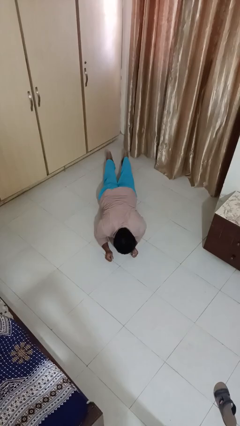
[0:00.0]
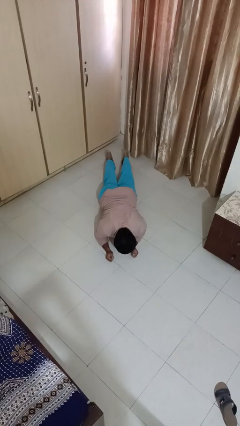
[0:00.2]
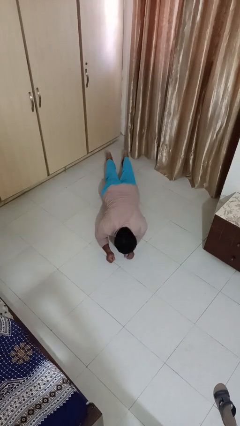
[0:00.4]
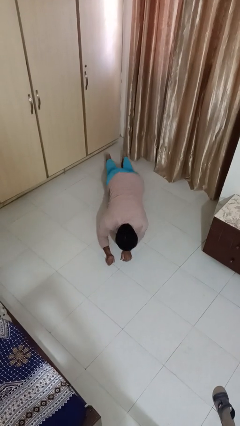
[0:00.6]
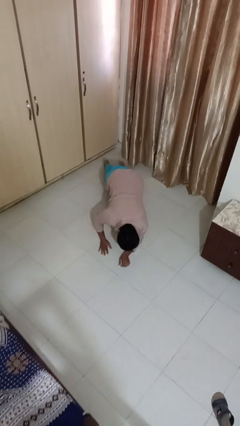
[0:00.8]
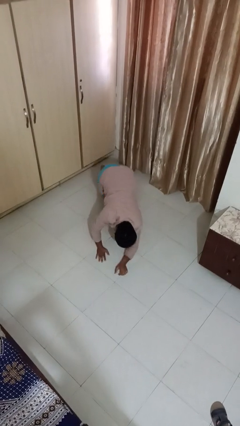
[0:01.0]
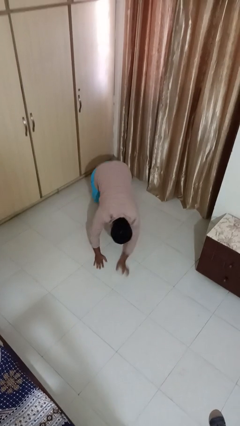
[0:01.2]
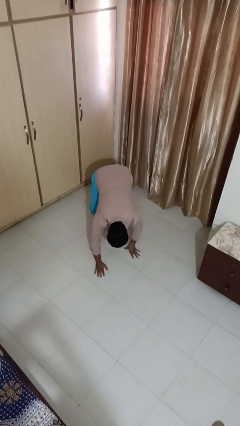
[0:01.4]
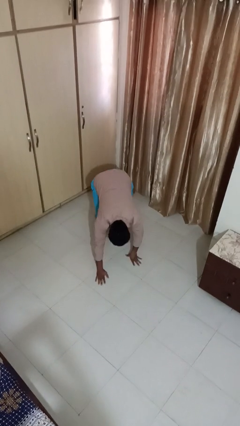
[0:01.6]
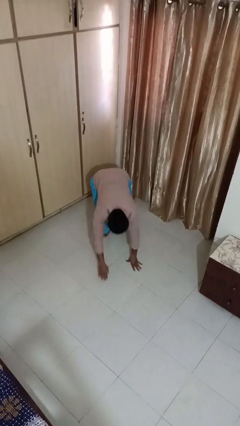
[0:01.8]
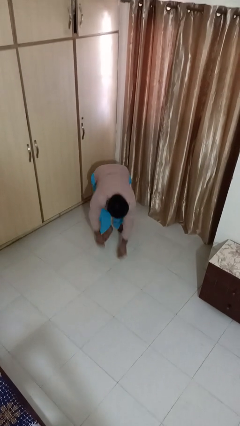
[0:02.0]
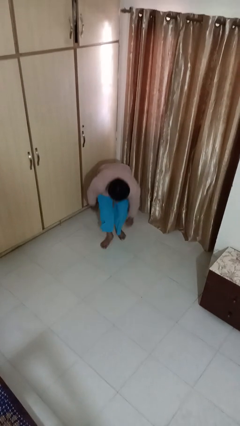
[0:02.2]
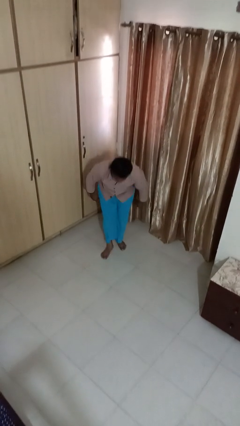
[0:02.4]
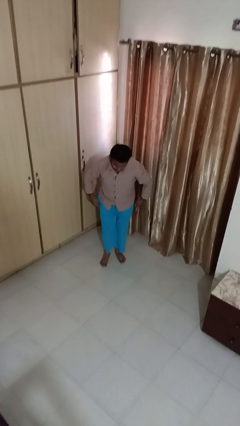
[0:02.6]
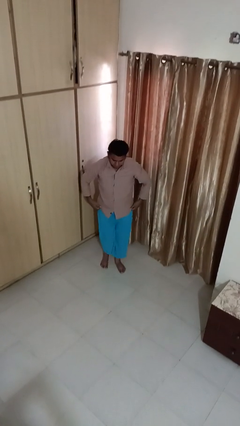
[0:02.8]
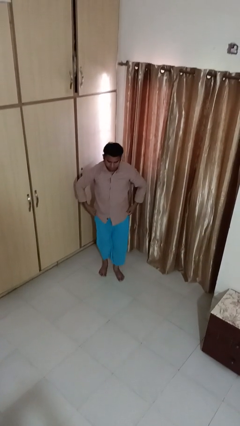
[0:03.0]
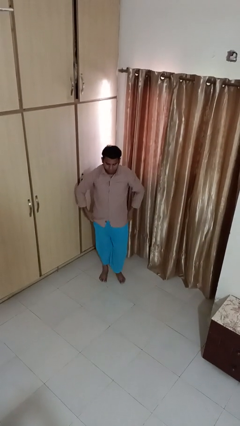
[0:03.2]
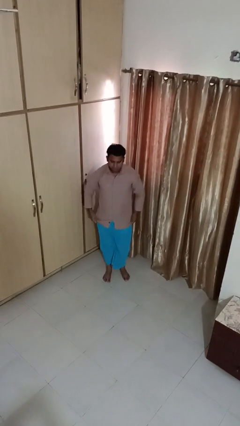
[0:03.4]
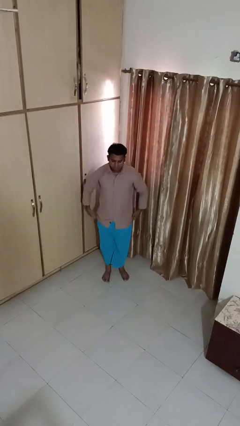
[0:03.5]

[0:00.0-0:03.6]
person stands up from floor

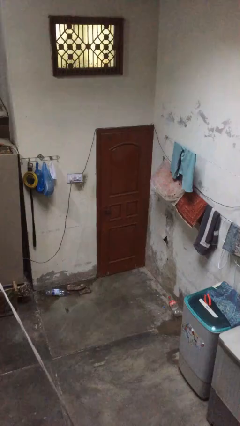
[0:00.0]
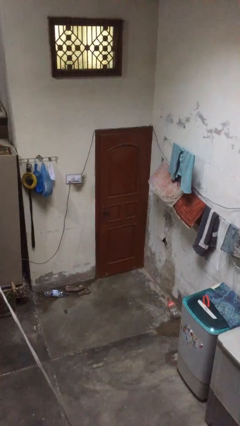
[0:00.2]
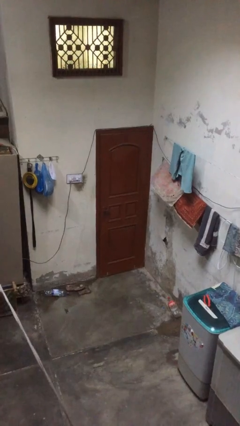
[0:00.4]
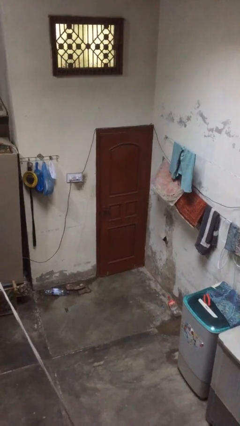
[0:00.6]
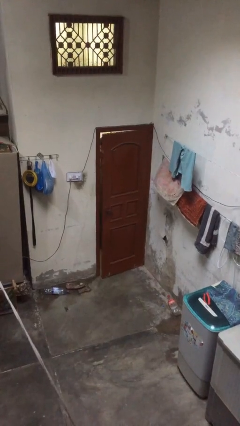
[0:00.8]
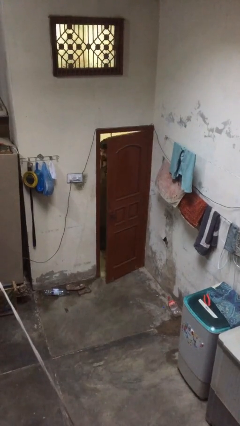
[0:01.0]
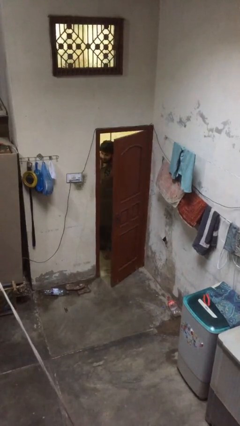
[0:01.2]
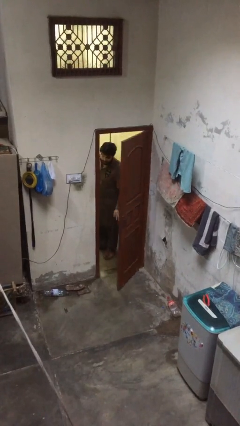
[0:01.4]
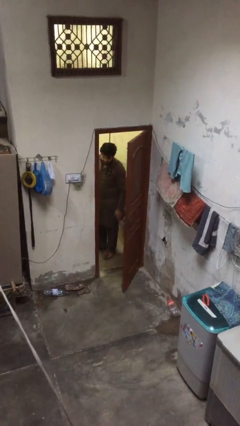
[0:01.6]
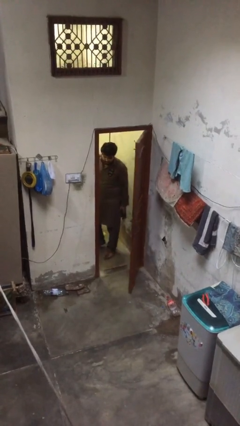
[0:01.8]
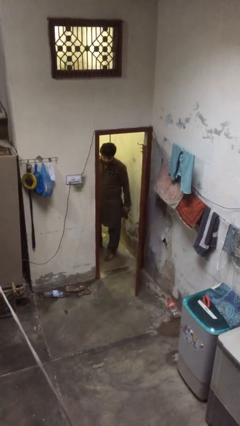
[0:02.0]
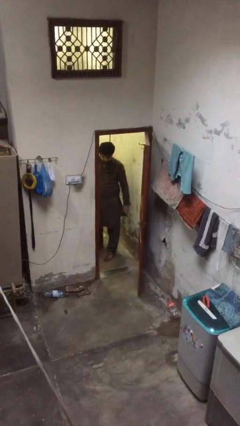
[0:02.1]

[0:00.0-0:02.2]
person opens facility door

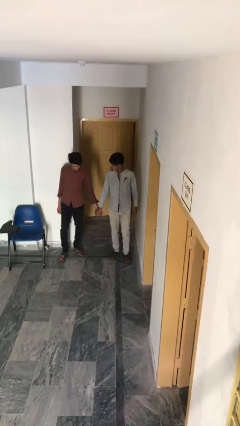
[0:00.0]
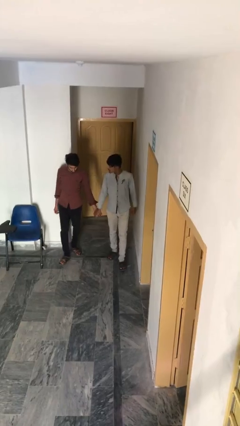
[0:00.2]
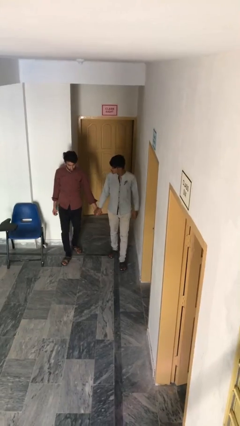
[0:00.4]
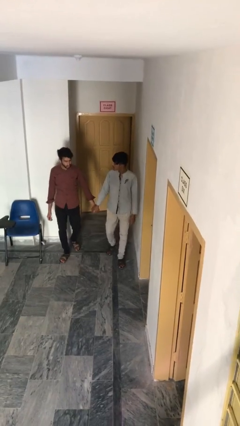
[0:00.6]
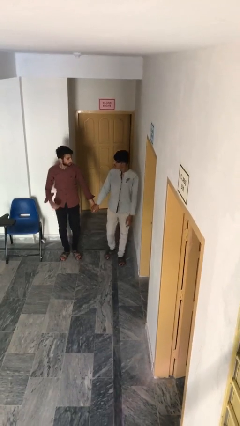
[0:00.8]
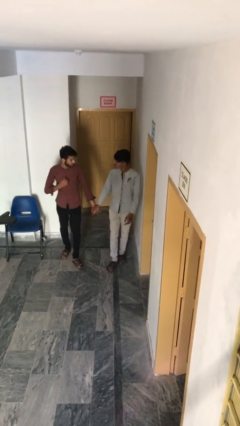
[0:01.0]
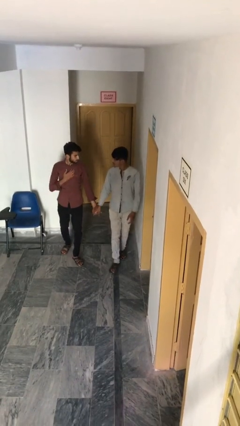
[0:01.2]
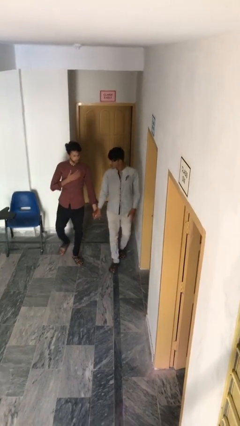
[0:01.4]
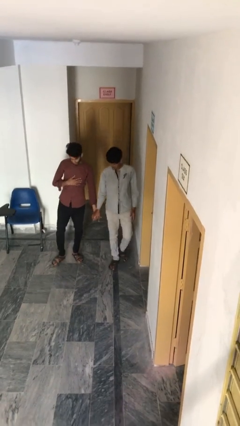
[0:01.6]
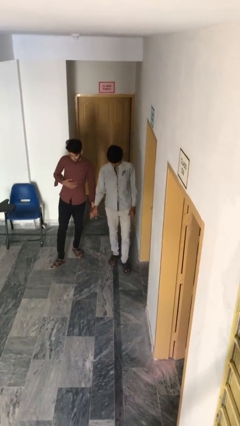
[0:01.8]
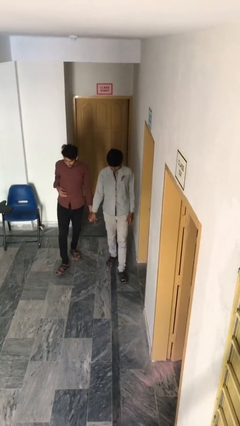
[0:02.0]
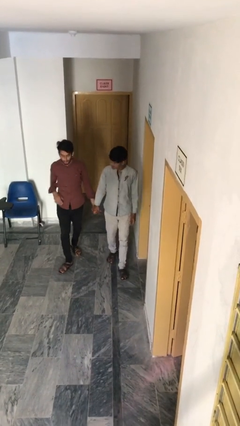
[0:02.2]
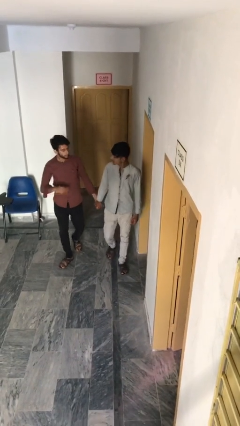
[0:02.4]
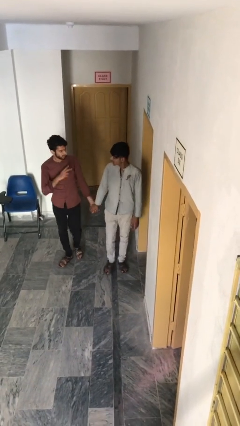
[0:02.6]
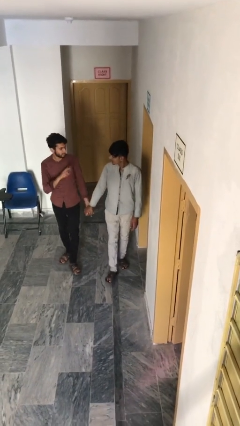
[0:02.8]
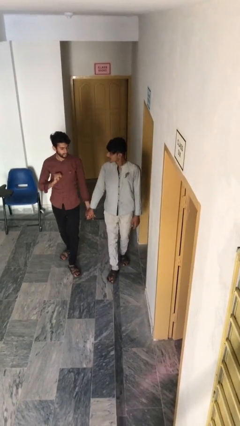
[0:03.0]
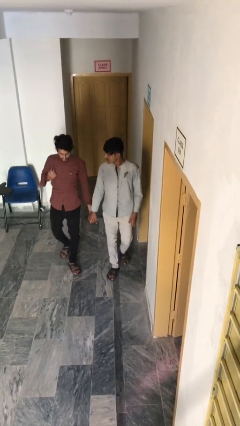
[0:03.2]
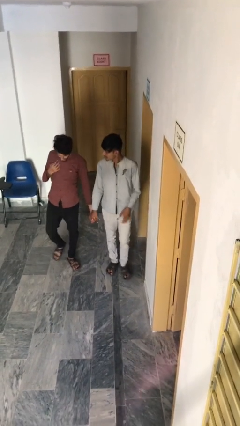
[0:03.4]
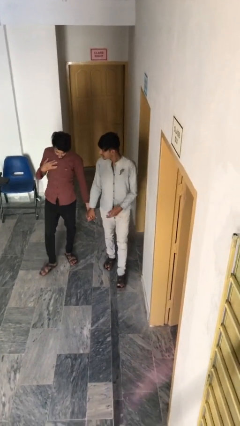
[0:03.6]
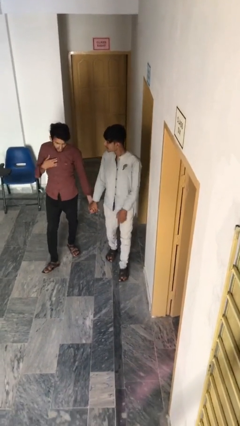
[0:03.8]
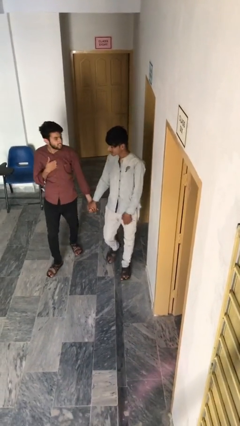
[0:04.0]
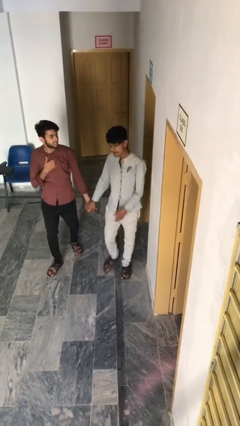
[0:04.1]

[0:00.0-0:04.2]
person holds hand

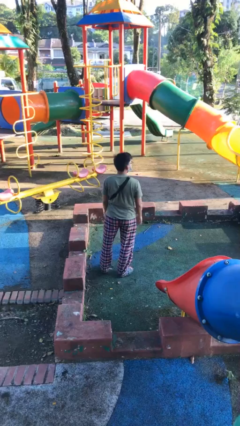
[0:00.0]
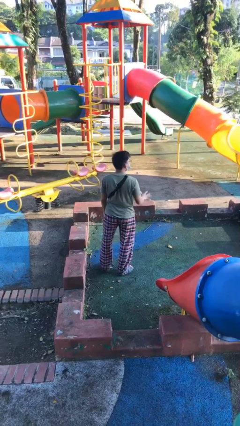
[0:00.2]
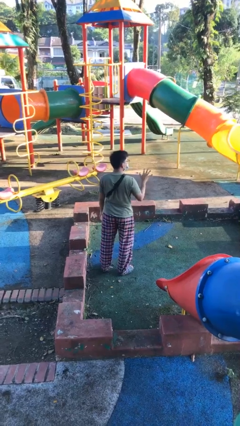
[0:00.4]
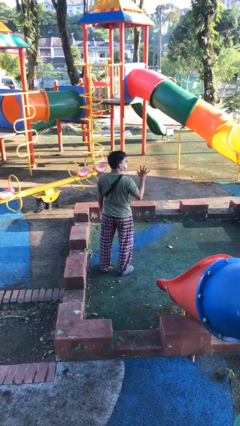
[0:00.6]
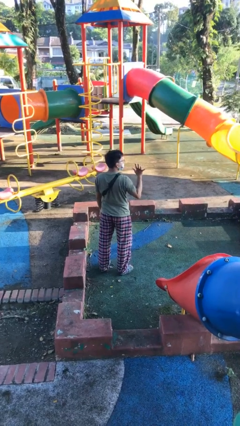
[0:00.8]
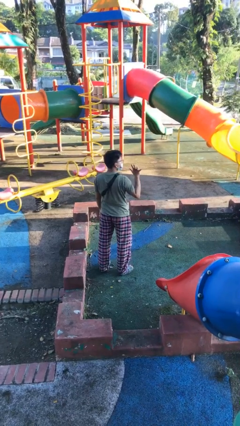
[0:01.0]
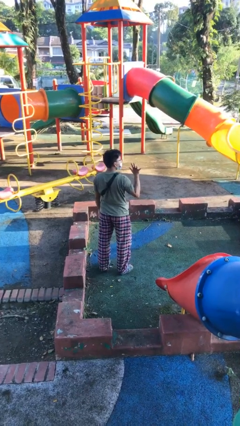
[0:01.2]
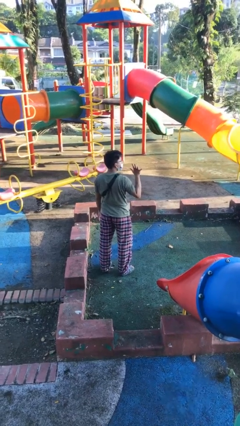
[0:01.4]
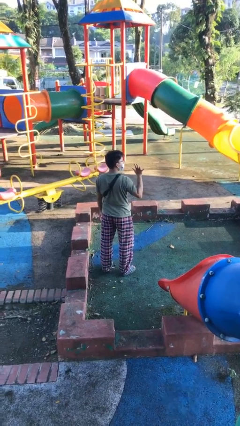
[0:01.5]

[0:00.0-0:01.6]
person gestures number five

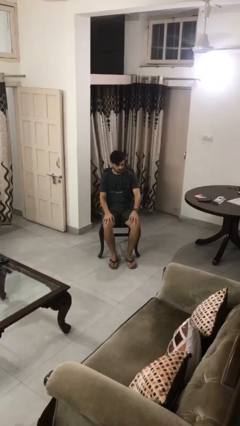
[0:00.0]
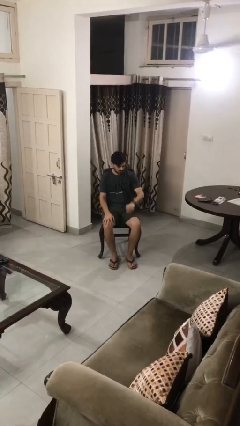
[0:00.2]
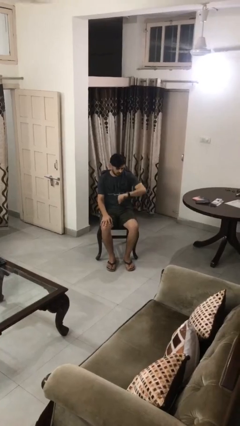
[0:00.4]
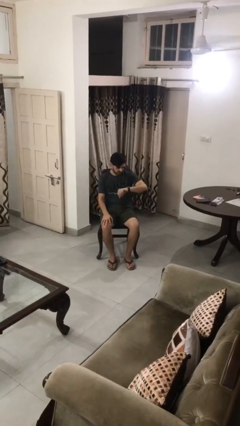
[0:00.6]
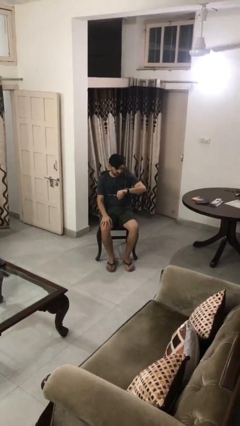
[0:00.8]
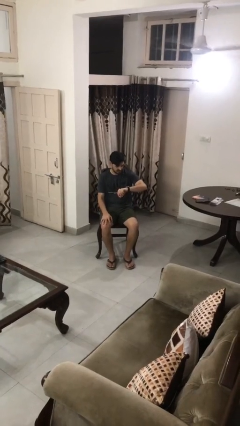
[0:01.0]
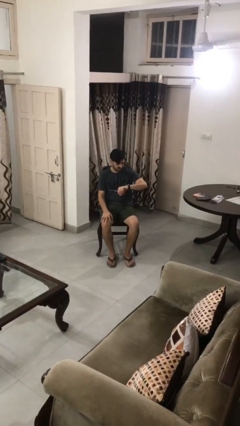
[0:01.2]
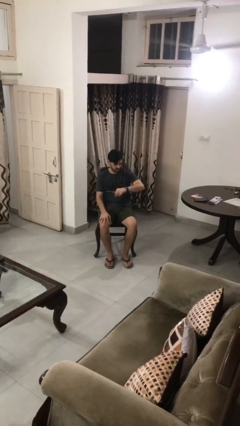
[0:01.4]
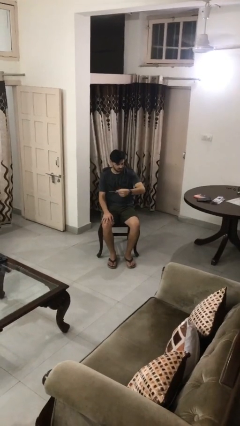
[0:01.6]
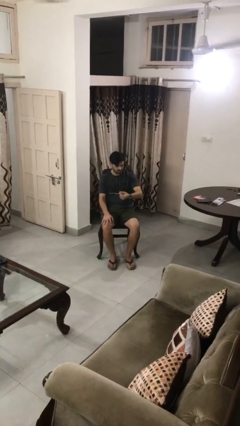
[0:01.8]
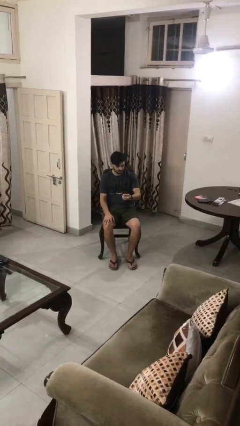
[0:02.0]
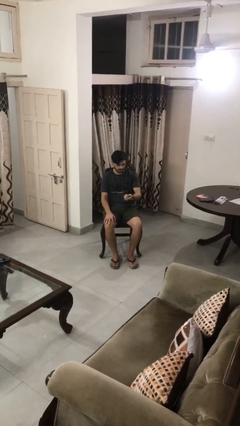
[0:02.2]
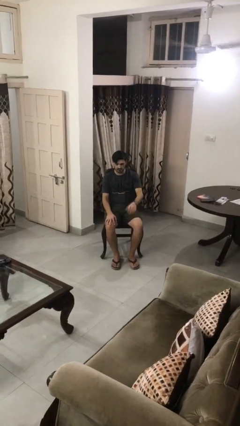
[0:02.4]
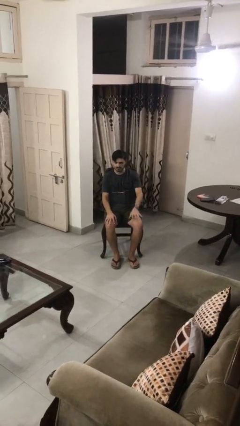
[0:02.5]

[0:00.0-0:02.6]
person looks at wristwatch

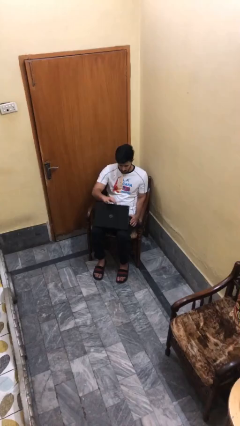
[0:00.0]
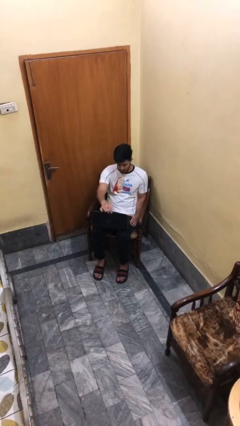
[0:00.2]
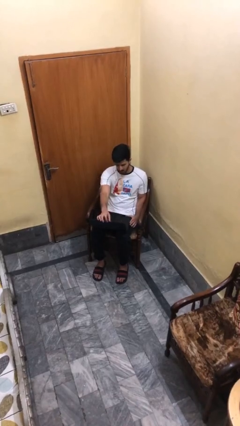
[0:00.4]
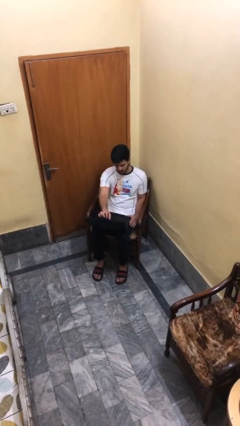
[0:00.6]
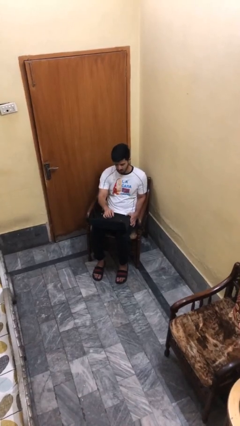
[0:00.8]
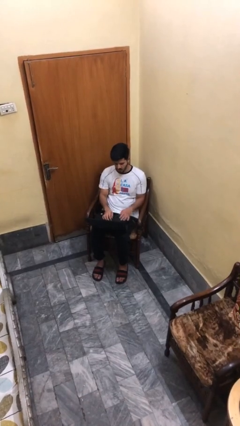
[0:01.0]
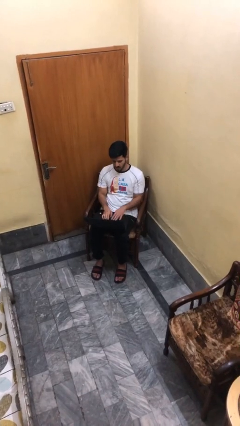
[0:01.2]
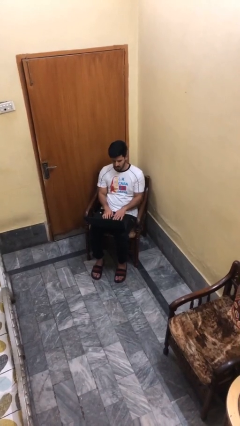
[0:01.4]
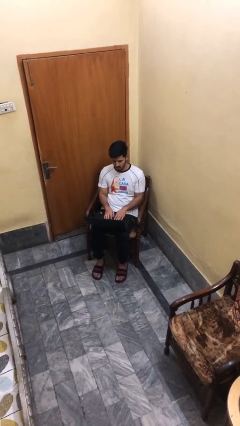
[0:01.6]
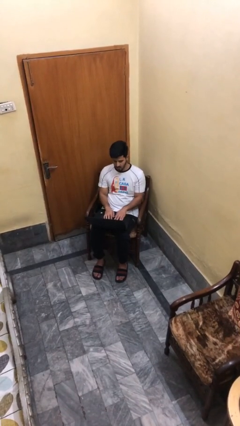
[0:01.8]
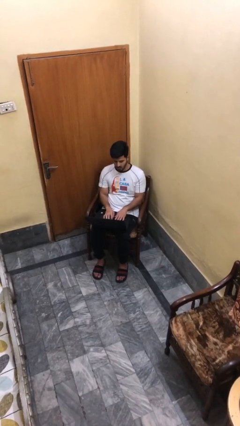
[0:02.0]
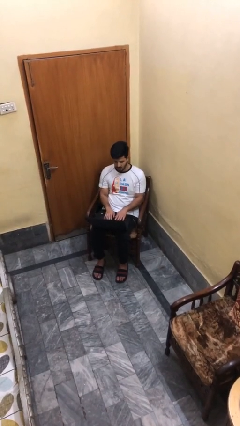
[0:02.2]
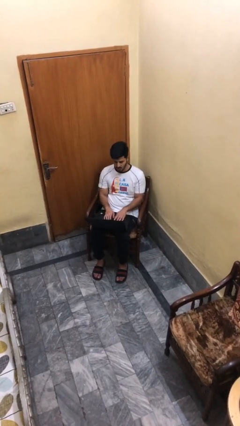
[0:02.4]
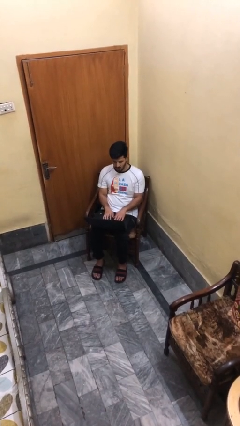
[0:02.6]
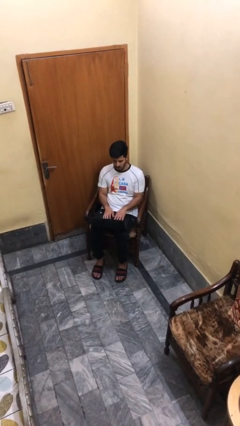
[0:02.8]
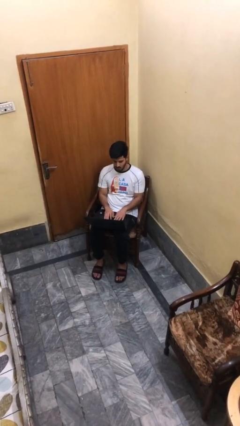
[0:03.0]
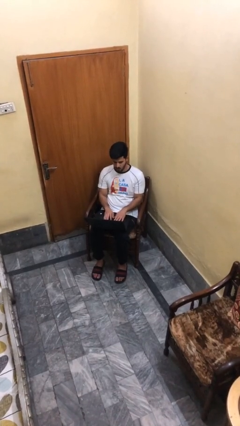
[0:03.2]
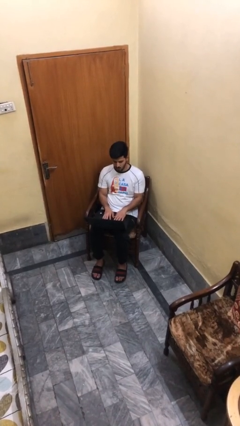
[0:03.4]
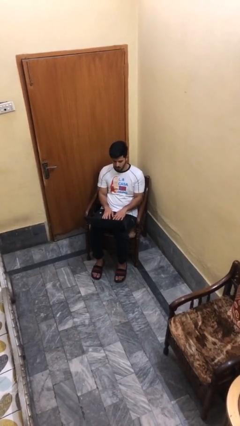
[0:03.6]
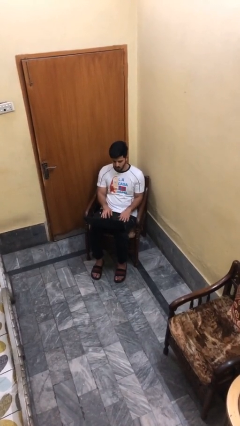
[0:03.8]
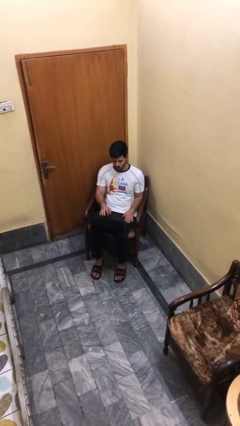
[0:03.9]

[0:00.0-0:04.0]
person interacts with laptop
